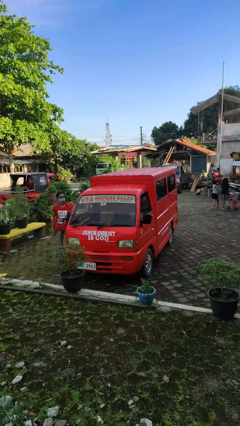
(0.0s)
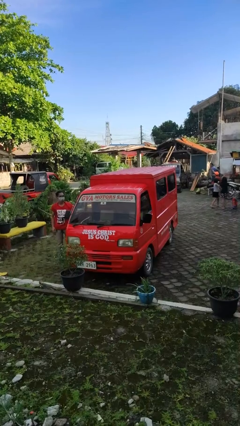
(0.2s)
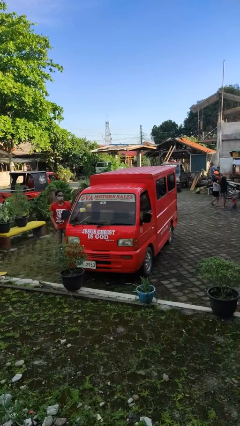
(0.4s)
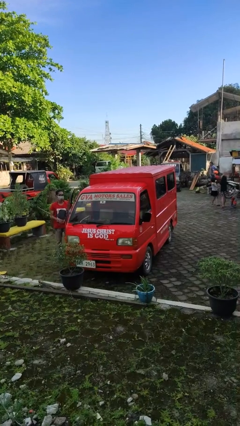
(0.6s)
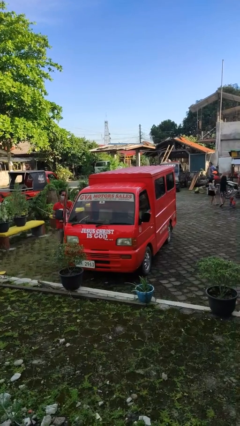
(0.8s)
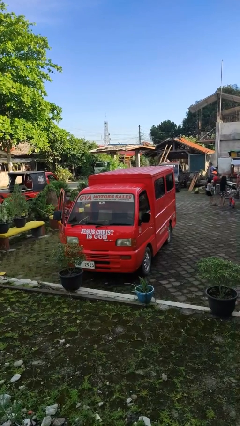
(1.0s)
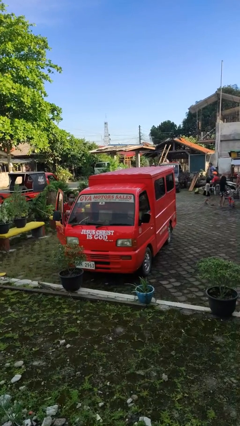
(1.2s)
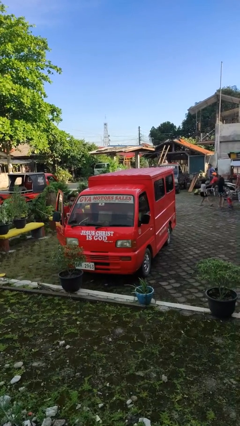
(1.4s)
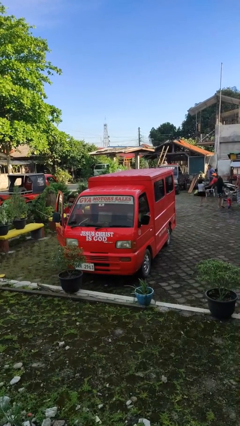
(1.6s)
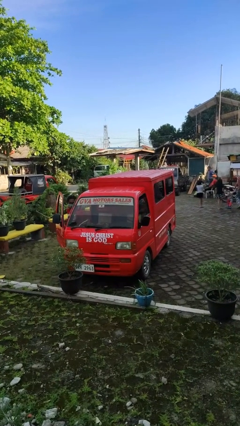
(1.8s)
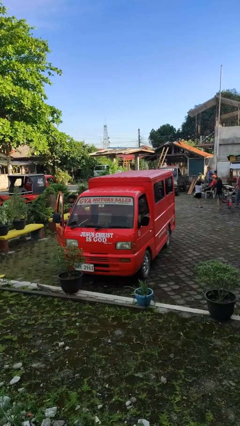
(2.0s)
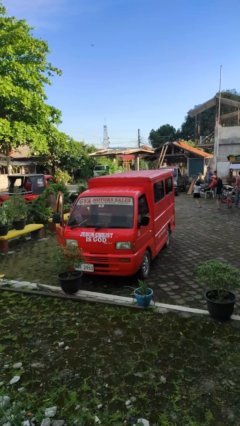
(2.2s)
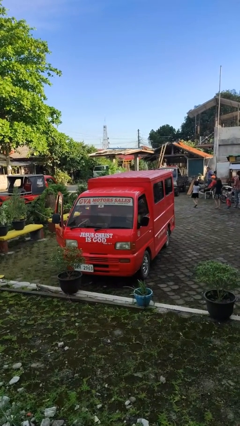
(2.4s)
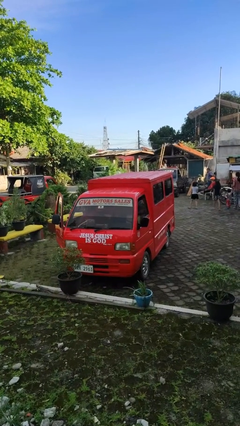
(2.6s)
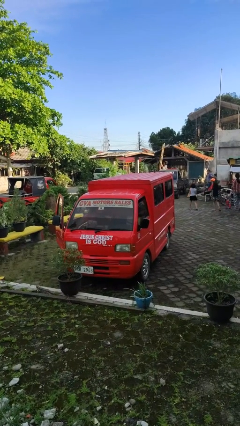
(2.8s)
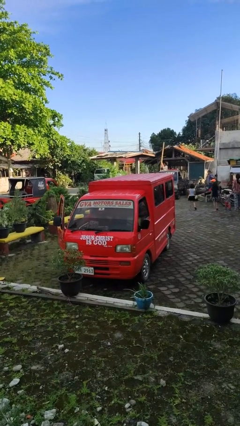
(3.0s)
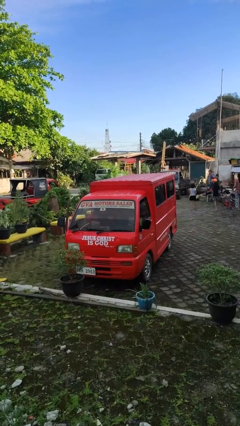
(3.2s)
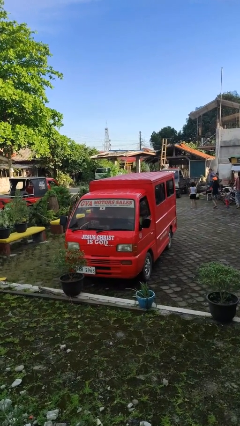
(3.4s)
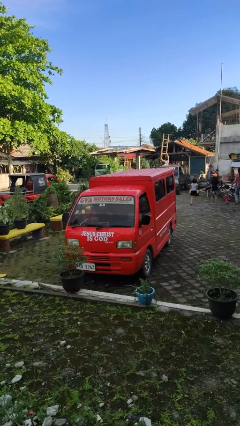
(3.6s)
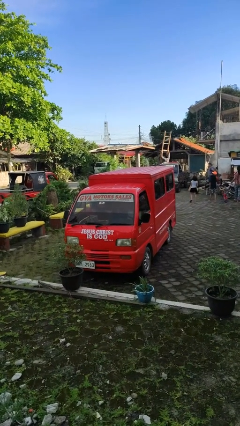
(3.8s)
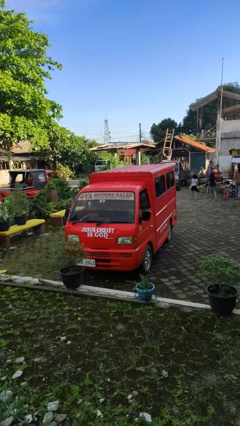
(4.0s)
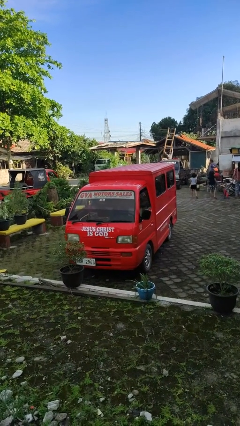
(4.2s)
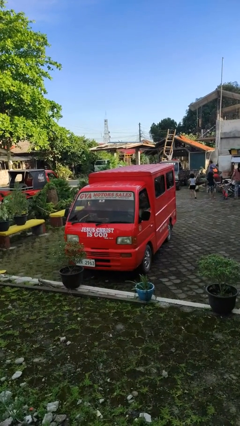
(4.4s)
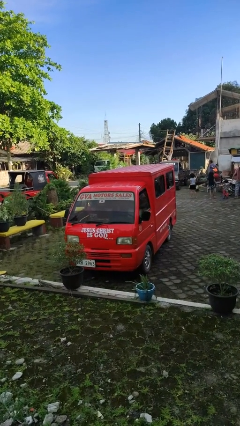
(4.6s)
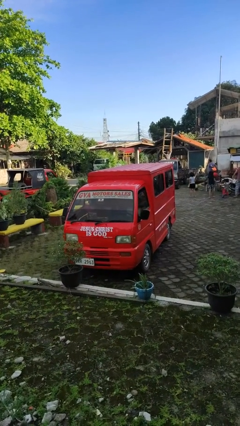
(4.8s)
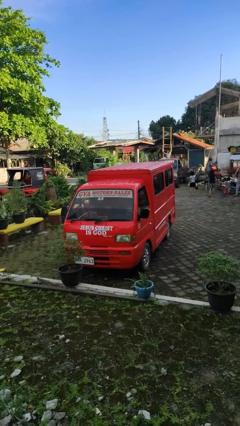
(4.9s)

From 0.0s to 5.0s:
car picks up person

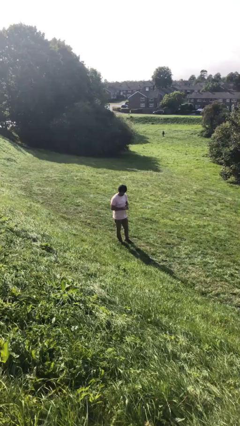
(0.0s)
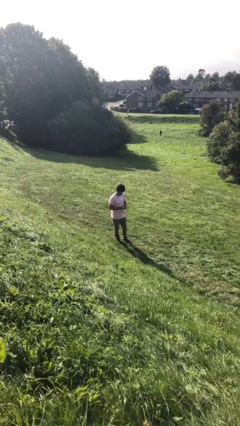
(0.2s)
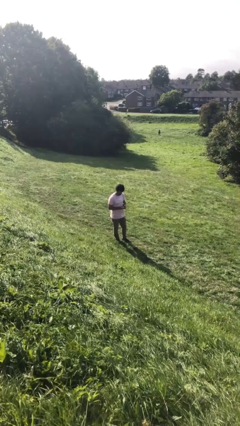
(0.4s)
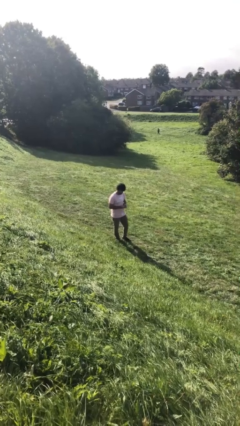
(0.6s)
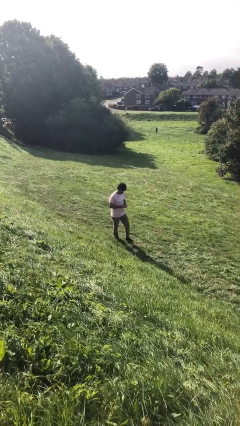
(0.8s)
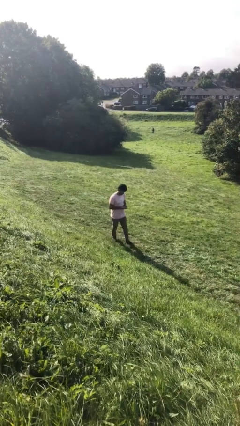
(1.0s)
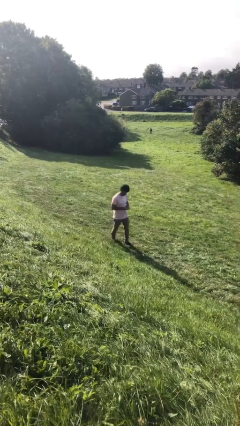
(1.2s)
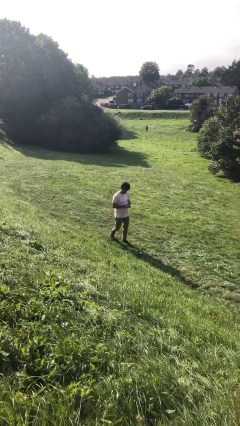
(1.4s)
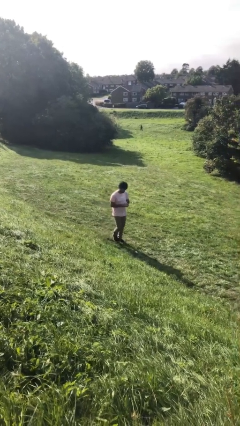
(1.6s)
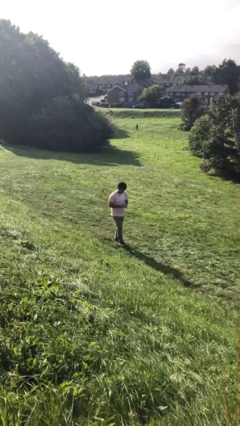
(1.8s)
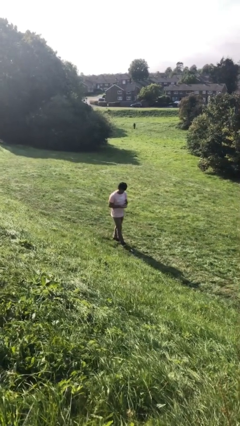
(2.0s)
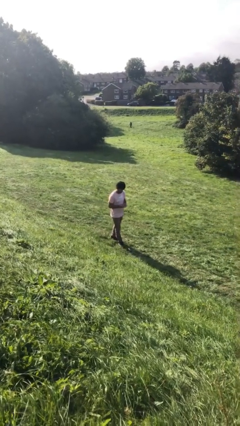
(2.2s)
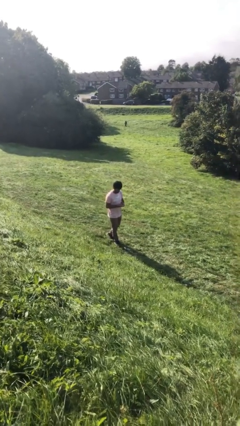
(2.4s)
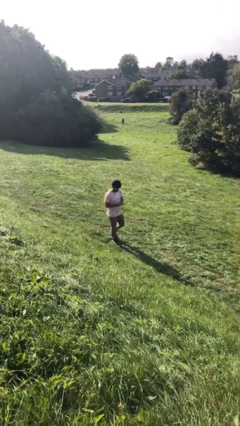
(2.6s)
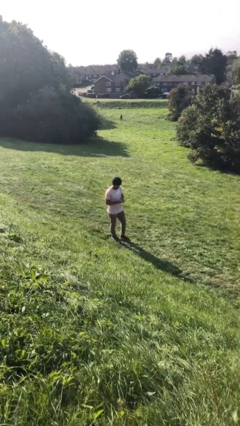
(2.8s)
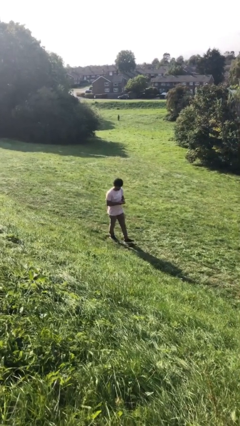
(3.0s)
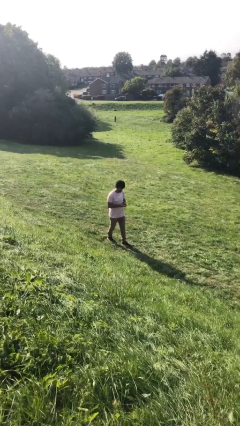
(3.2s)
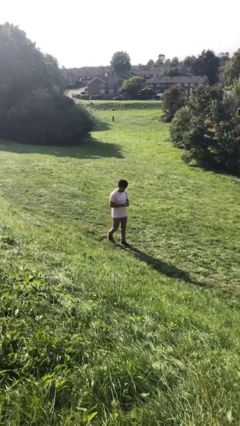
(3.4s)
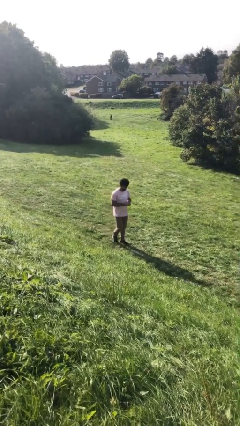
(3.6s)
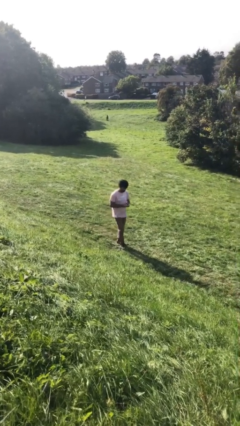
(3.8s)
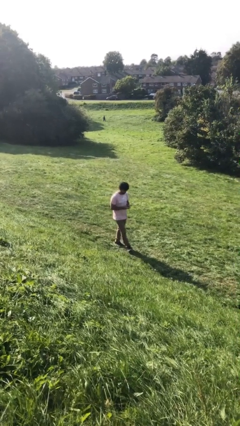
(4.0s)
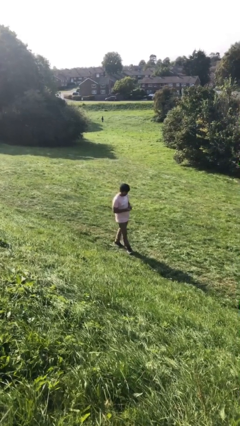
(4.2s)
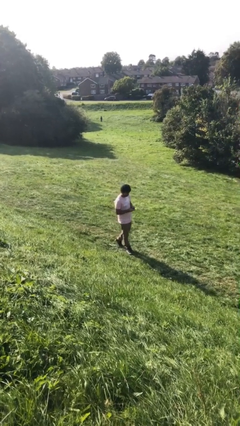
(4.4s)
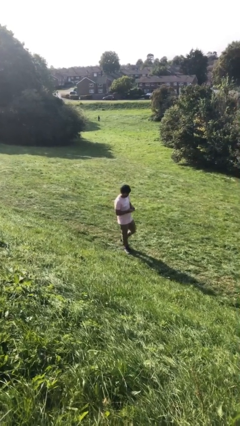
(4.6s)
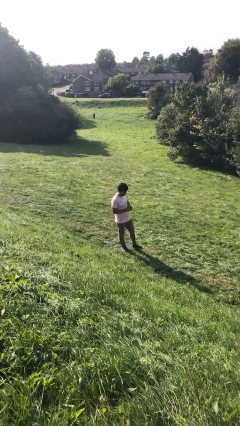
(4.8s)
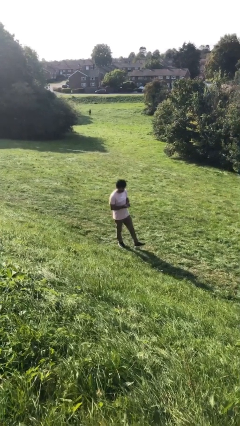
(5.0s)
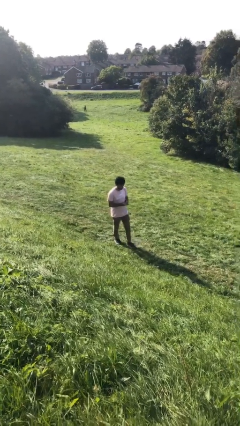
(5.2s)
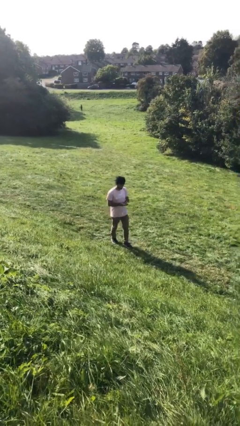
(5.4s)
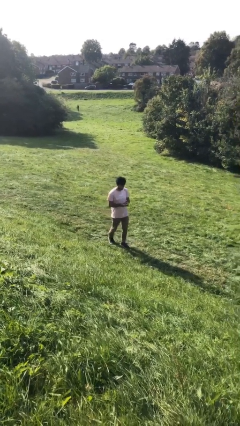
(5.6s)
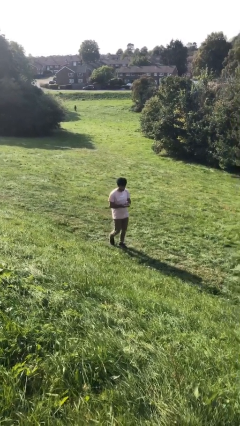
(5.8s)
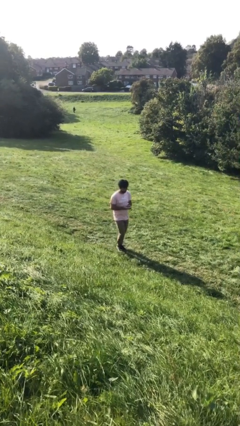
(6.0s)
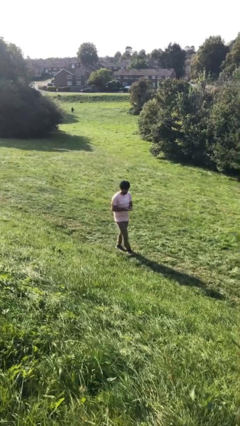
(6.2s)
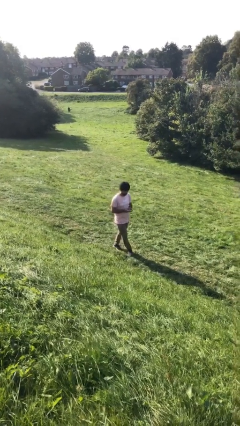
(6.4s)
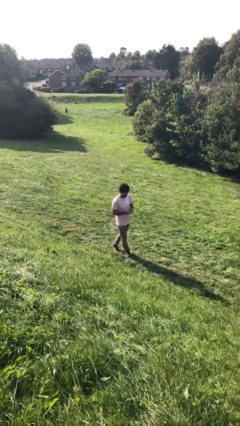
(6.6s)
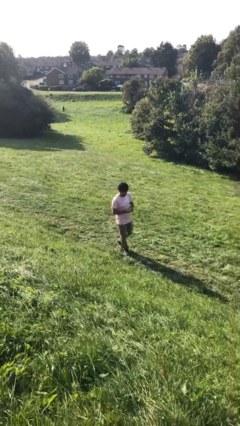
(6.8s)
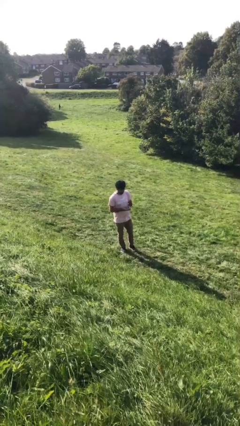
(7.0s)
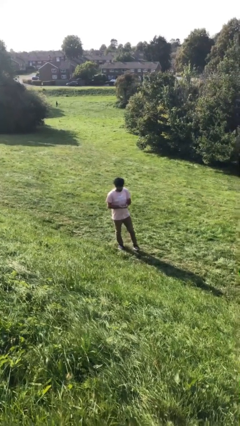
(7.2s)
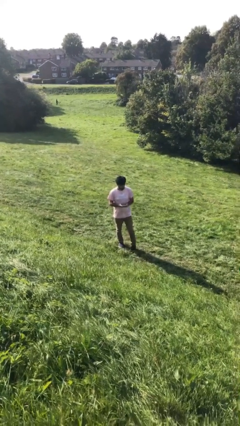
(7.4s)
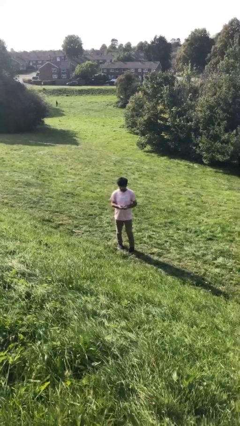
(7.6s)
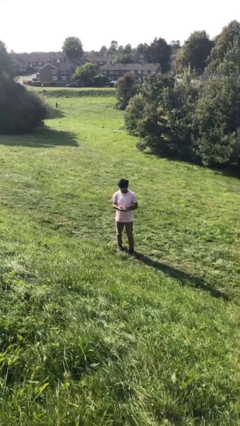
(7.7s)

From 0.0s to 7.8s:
person texts on phone

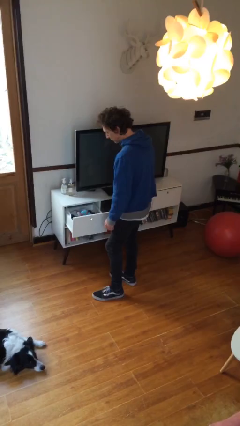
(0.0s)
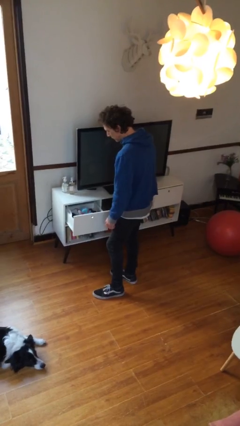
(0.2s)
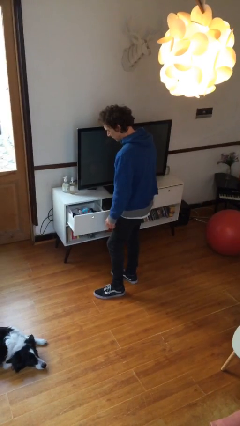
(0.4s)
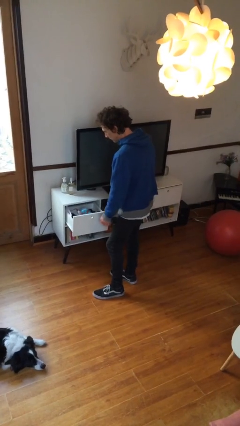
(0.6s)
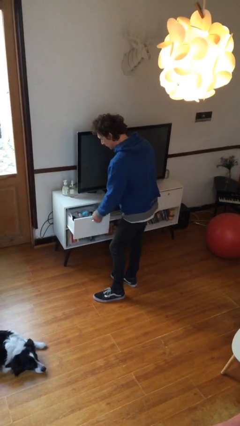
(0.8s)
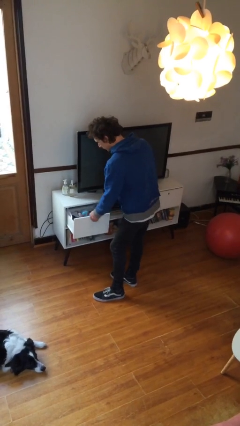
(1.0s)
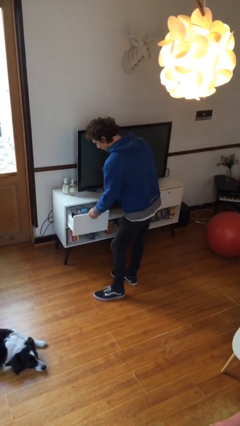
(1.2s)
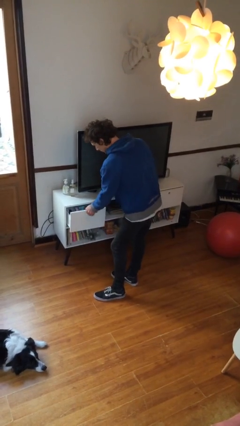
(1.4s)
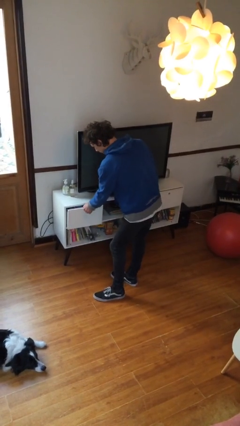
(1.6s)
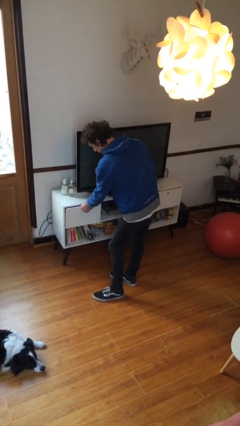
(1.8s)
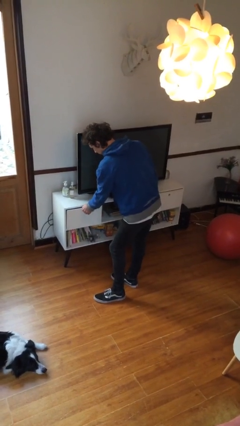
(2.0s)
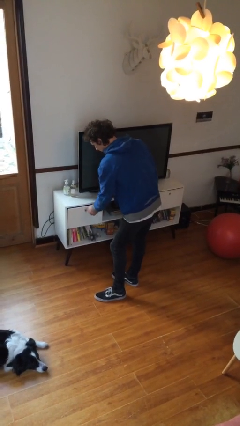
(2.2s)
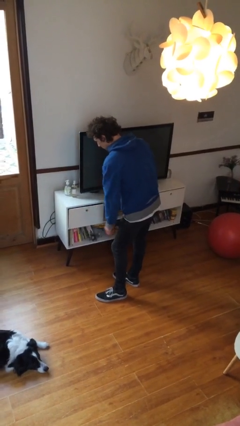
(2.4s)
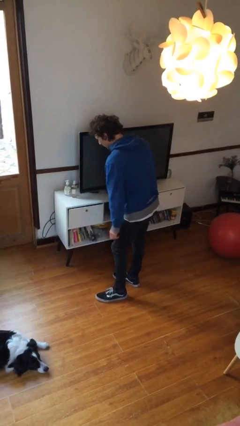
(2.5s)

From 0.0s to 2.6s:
person closes dresser drawer

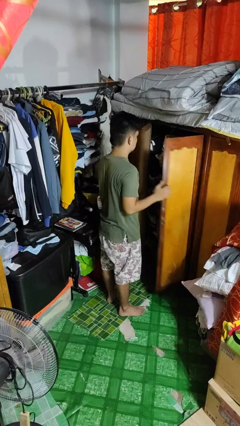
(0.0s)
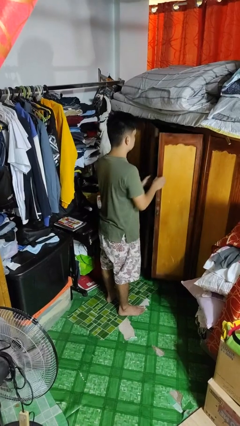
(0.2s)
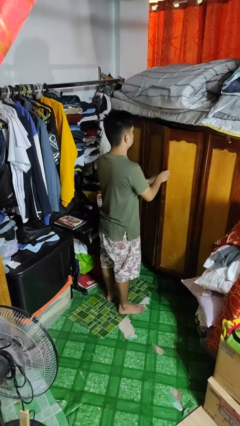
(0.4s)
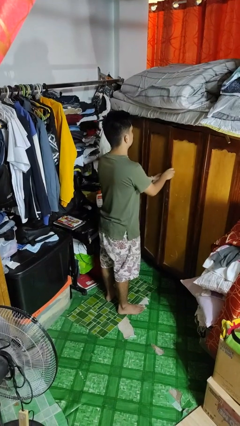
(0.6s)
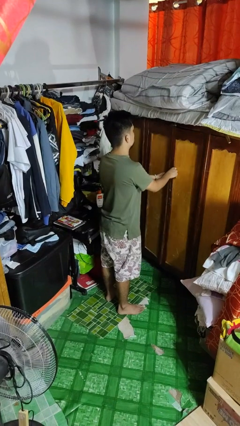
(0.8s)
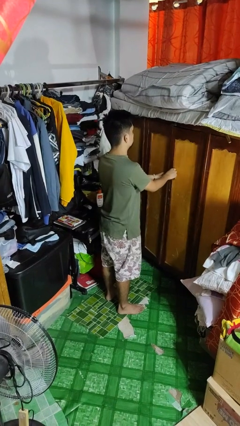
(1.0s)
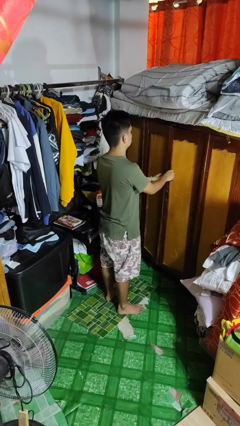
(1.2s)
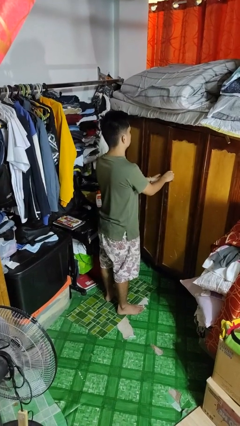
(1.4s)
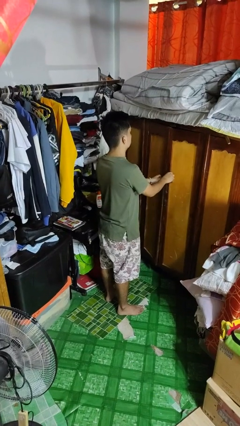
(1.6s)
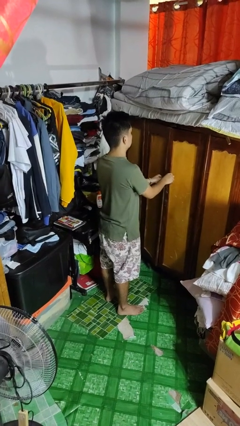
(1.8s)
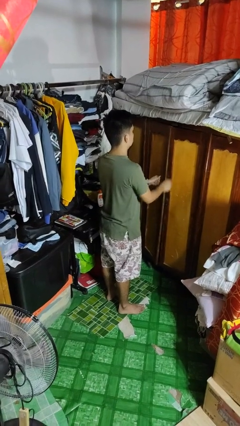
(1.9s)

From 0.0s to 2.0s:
person closes closet door

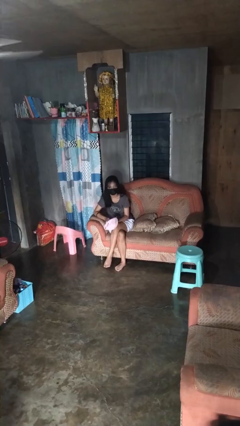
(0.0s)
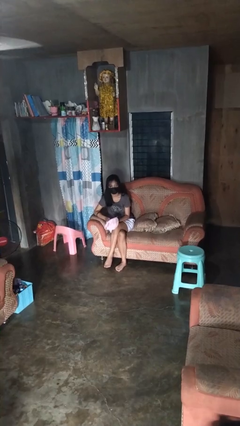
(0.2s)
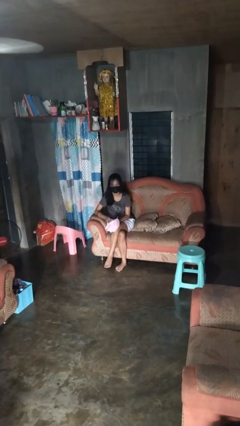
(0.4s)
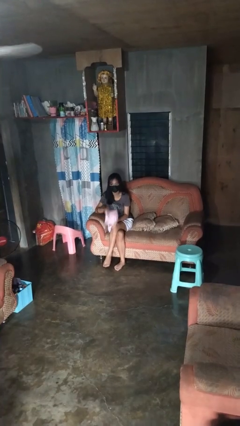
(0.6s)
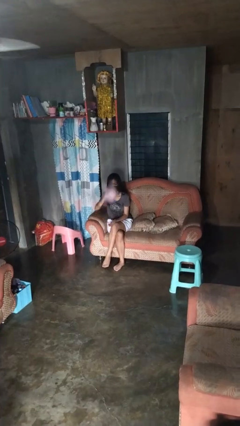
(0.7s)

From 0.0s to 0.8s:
person puts on hat
